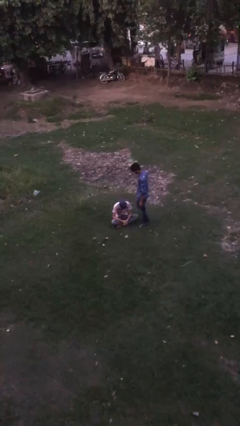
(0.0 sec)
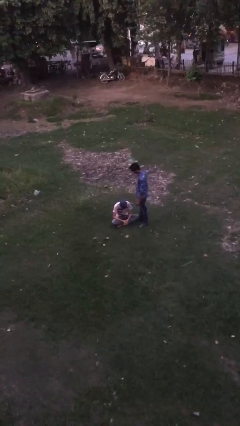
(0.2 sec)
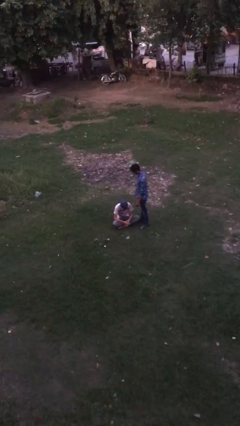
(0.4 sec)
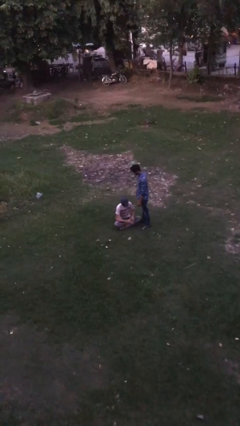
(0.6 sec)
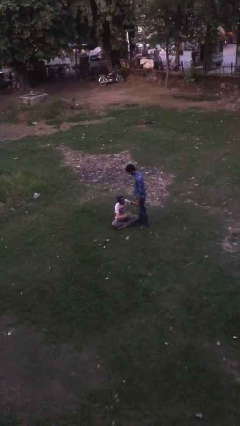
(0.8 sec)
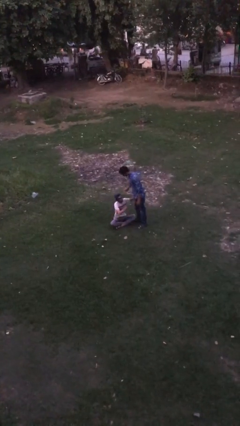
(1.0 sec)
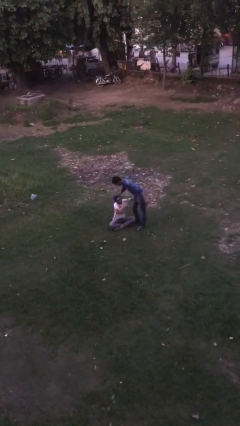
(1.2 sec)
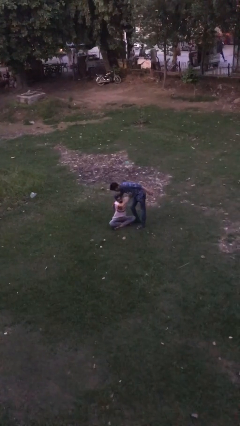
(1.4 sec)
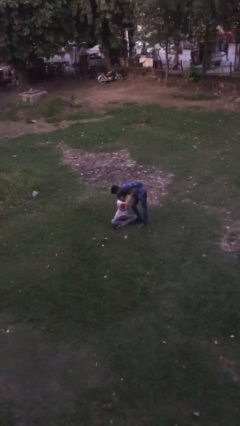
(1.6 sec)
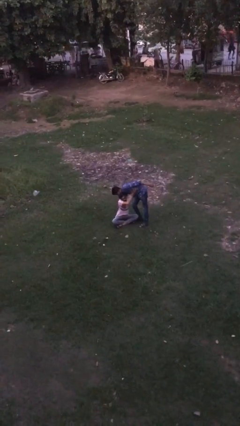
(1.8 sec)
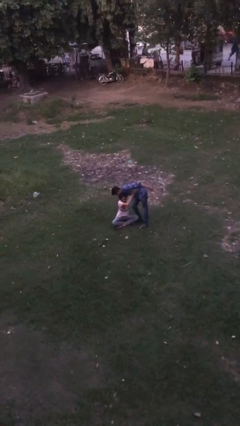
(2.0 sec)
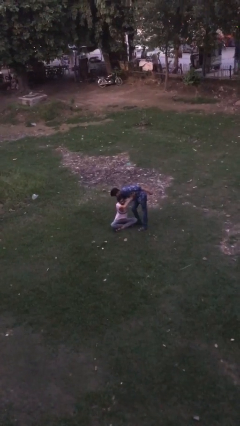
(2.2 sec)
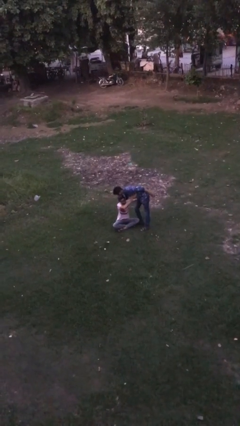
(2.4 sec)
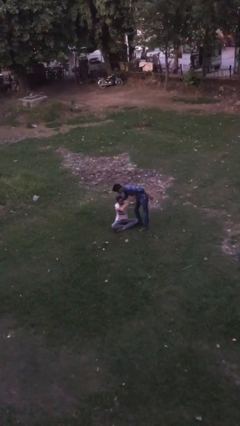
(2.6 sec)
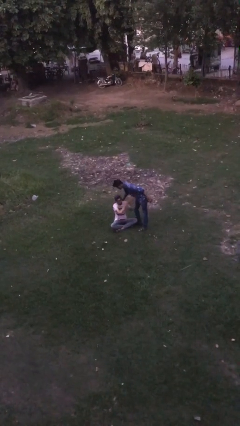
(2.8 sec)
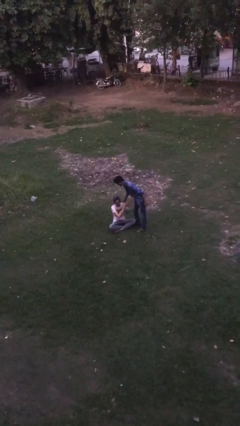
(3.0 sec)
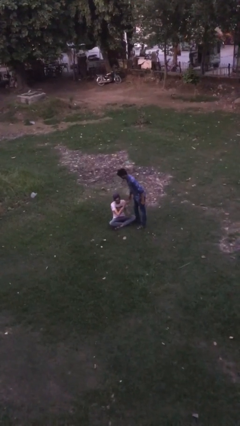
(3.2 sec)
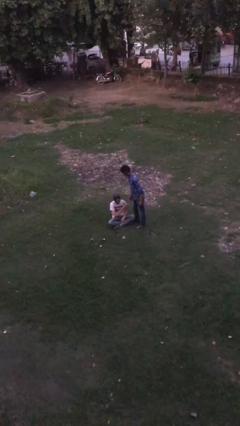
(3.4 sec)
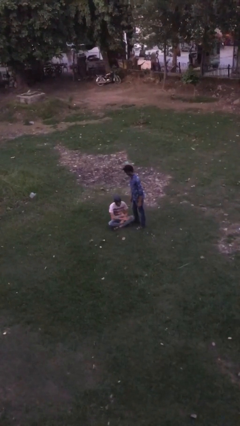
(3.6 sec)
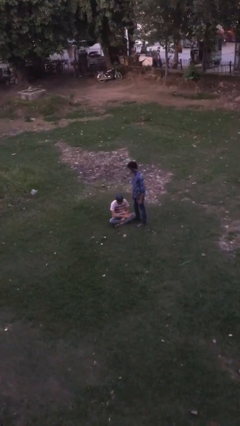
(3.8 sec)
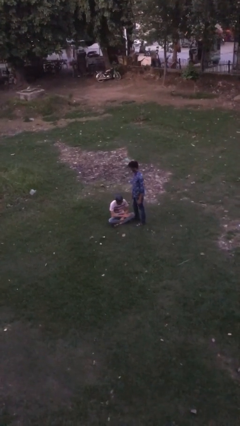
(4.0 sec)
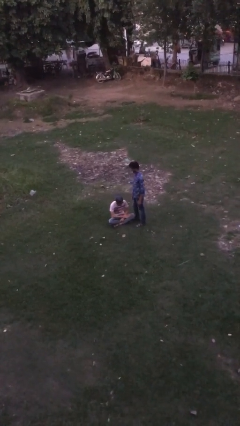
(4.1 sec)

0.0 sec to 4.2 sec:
person embraces person

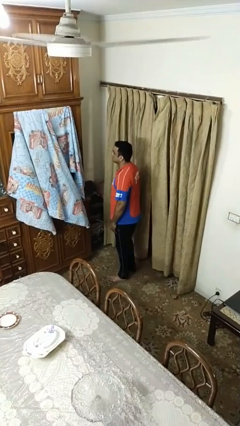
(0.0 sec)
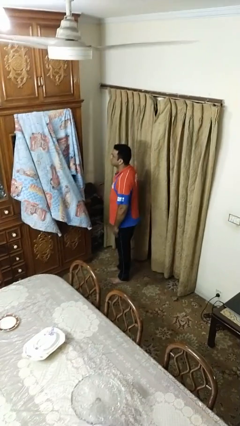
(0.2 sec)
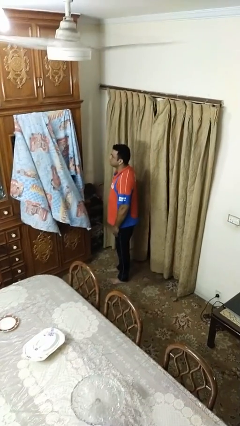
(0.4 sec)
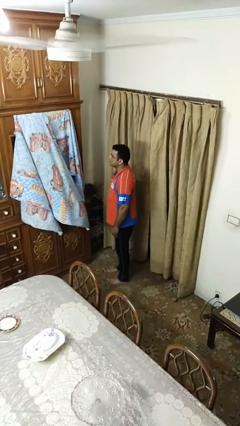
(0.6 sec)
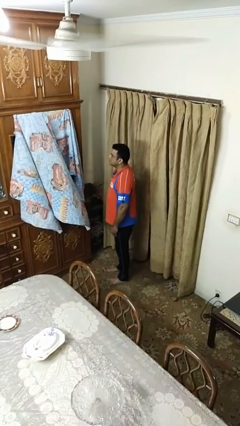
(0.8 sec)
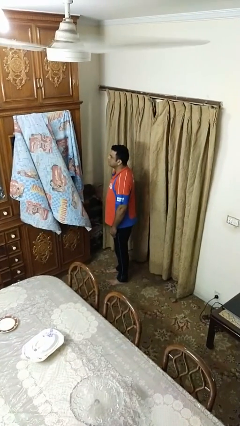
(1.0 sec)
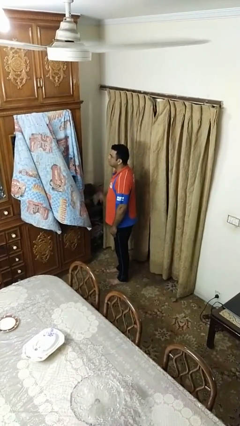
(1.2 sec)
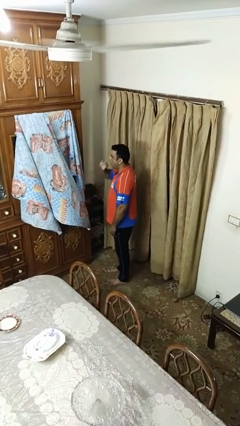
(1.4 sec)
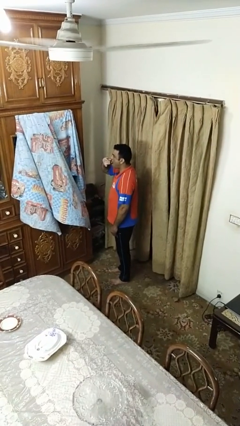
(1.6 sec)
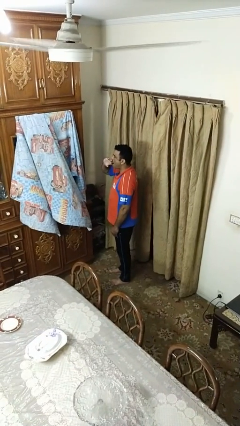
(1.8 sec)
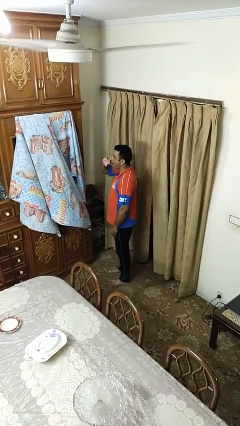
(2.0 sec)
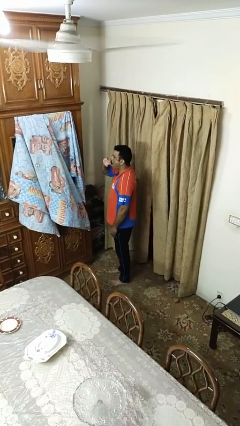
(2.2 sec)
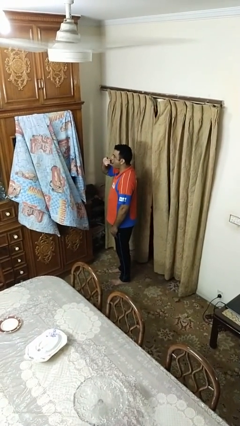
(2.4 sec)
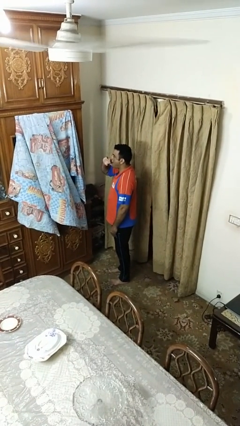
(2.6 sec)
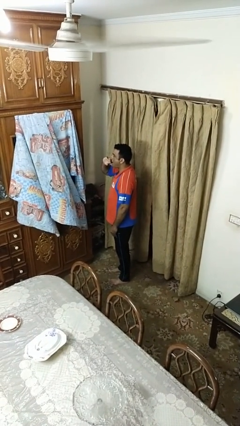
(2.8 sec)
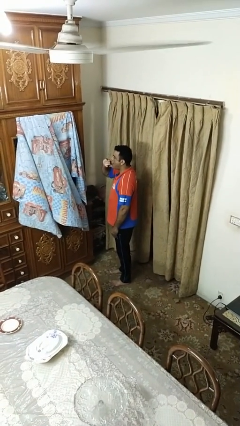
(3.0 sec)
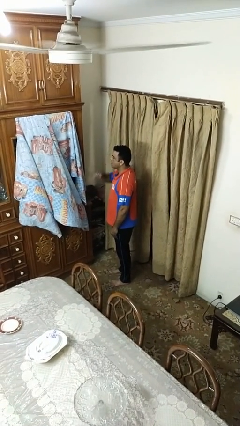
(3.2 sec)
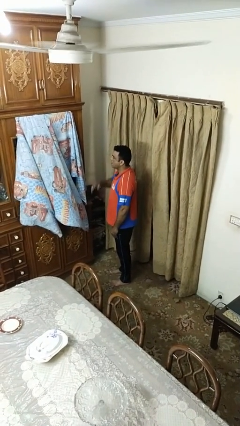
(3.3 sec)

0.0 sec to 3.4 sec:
person yawns

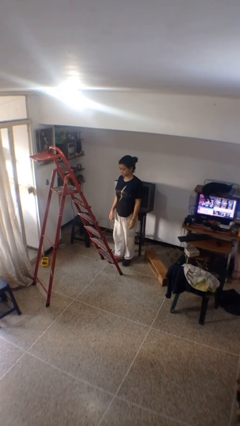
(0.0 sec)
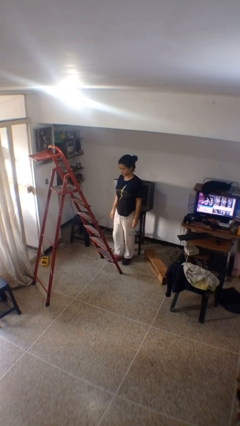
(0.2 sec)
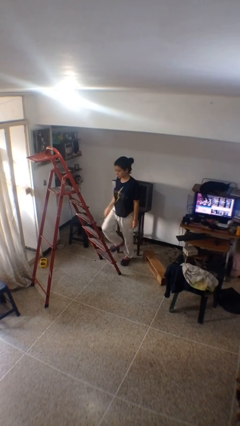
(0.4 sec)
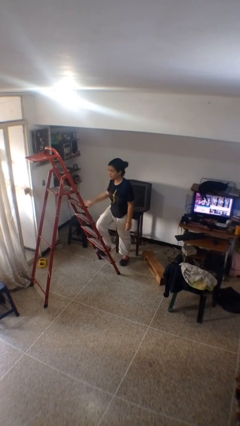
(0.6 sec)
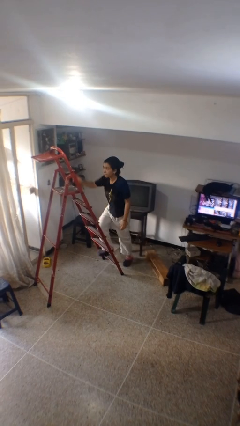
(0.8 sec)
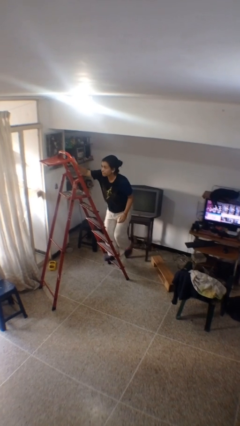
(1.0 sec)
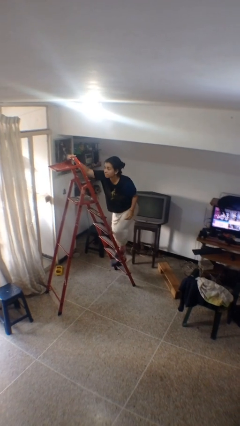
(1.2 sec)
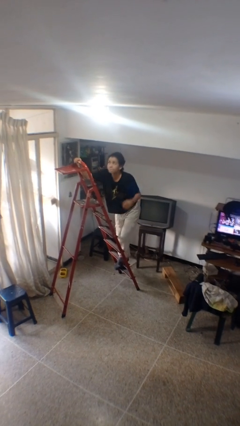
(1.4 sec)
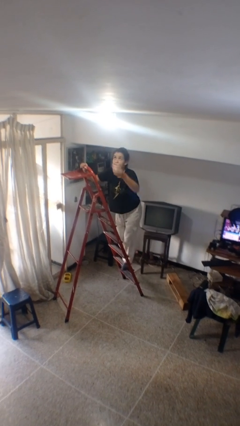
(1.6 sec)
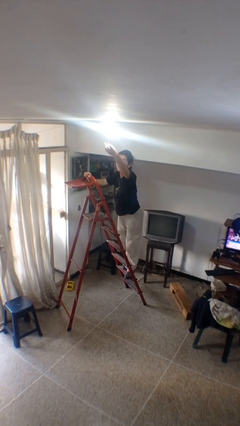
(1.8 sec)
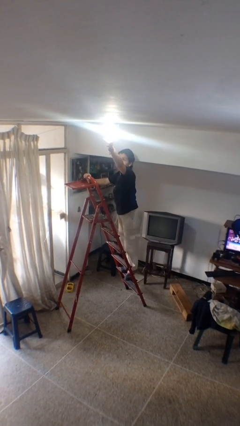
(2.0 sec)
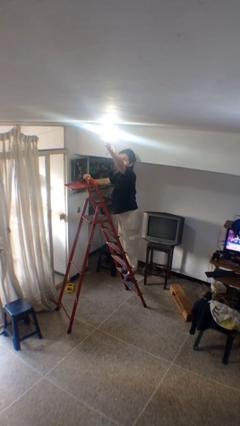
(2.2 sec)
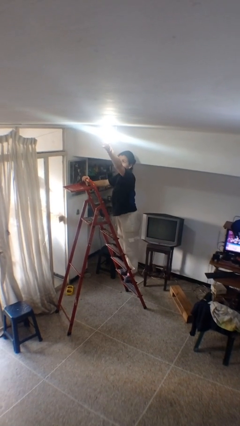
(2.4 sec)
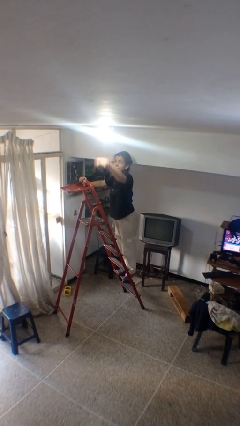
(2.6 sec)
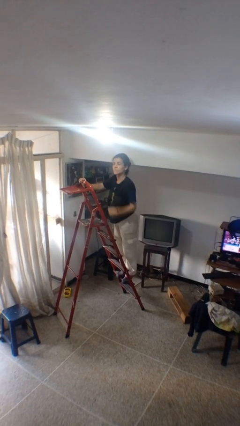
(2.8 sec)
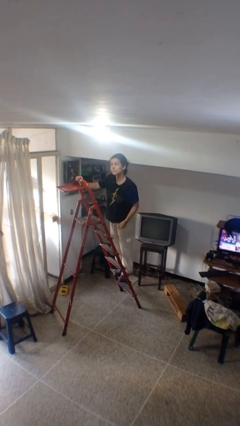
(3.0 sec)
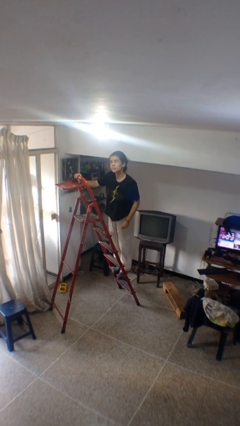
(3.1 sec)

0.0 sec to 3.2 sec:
person climbs up ladder

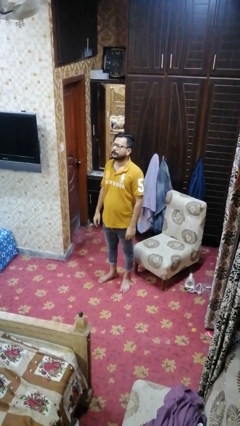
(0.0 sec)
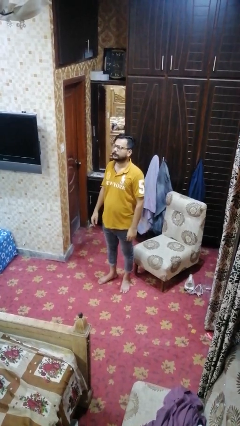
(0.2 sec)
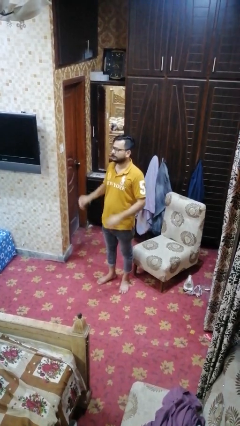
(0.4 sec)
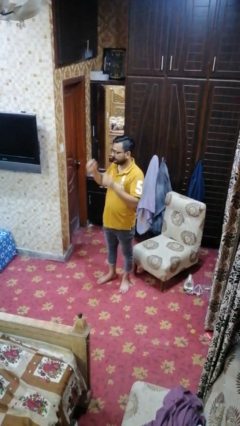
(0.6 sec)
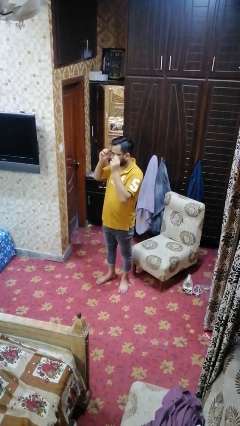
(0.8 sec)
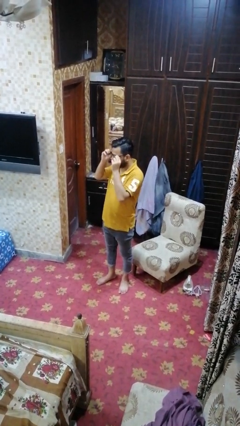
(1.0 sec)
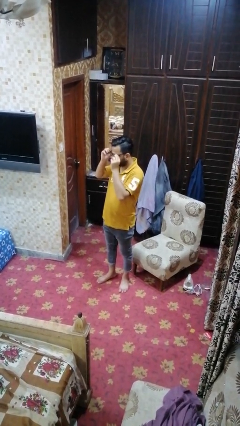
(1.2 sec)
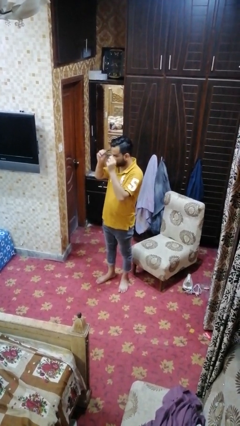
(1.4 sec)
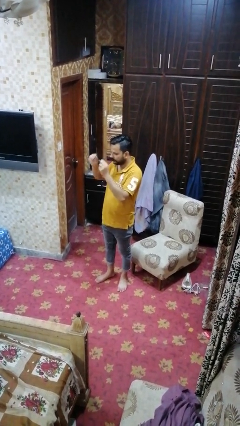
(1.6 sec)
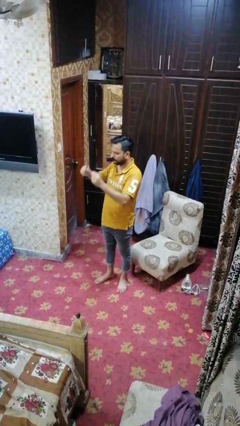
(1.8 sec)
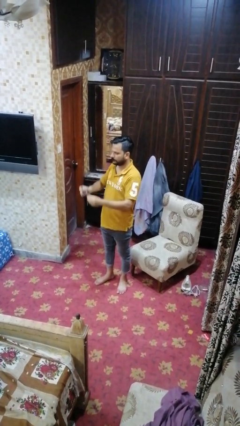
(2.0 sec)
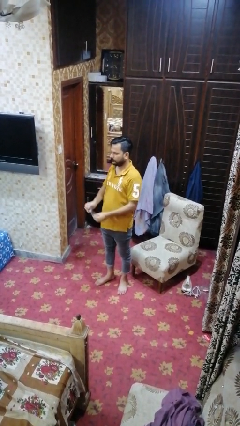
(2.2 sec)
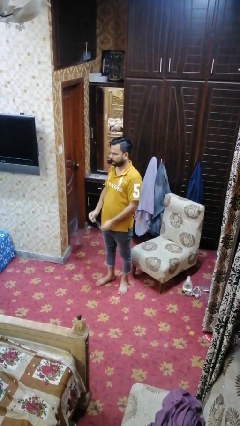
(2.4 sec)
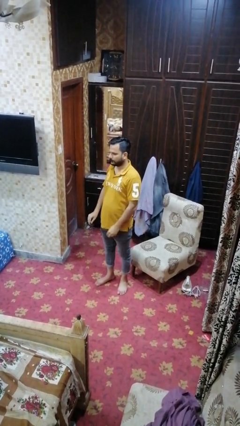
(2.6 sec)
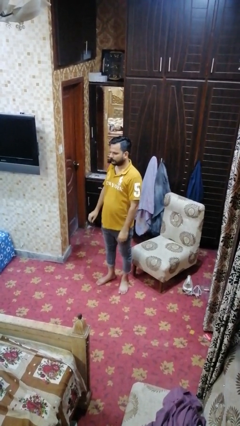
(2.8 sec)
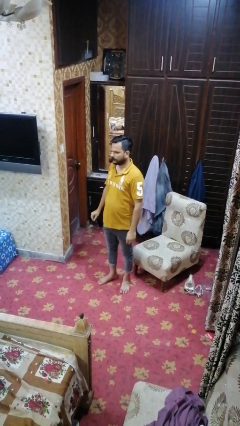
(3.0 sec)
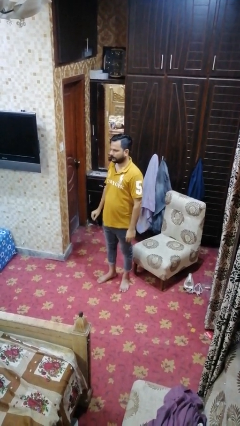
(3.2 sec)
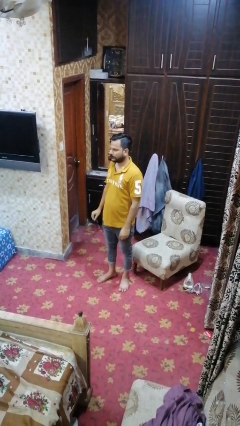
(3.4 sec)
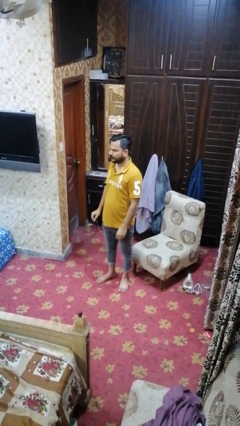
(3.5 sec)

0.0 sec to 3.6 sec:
person takes off glasses

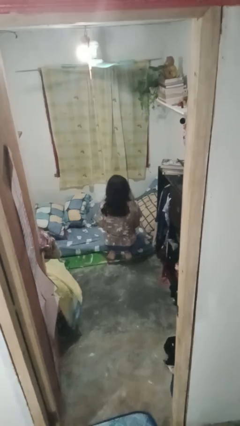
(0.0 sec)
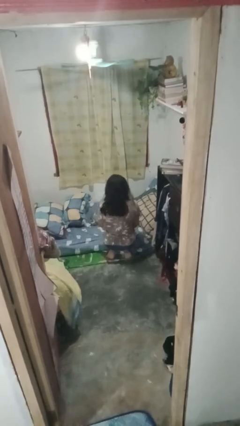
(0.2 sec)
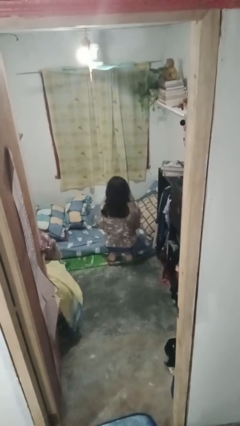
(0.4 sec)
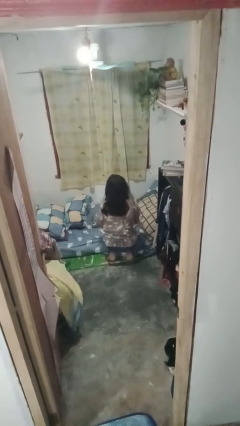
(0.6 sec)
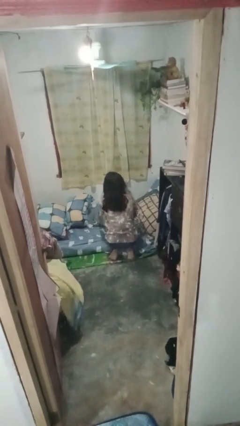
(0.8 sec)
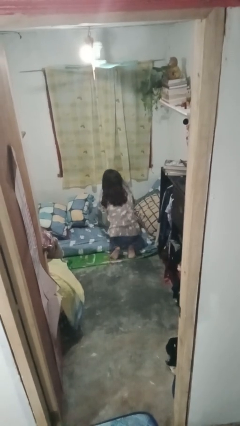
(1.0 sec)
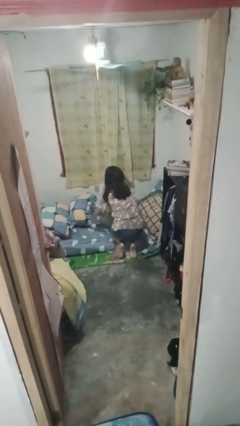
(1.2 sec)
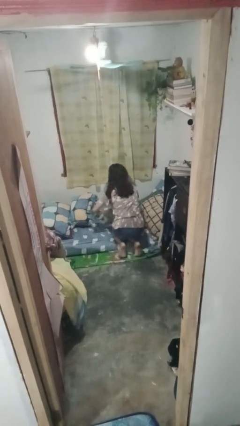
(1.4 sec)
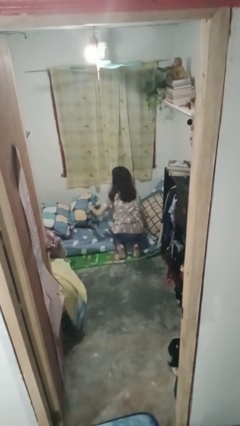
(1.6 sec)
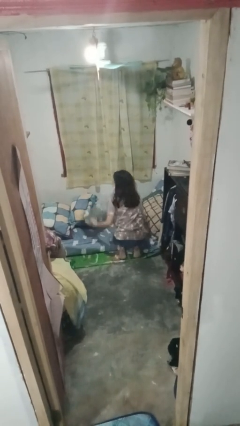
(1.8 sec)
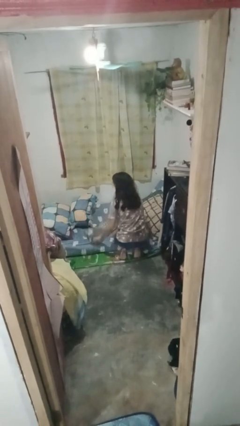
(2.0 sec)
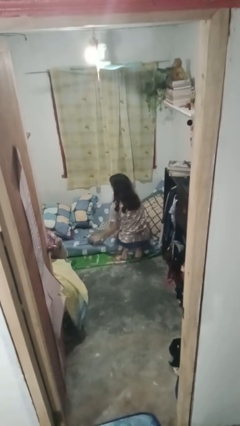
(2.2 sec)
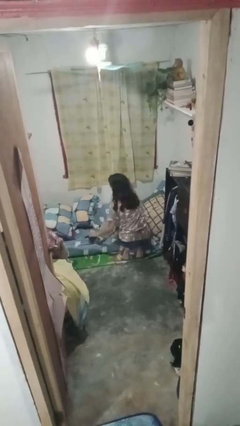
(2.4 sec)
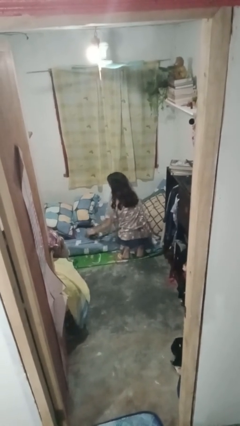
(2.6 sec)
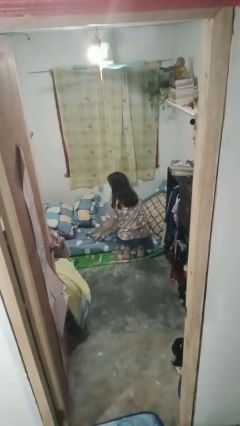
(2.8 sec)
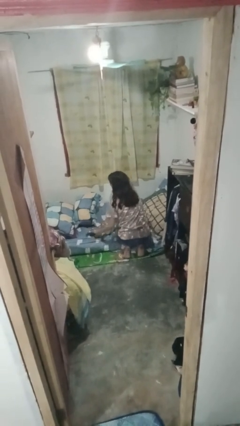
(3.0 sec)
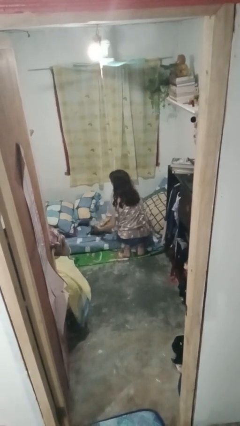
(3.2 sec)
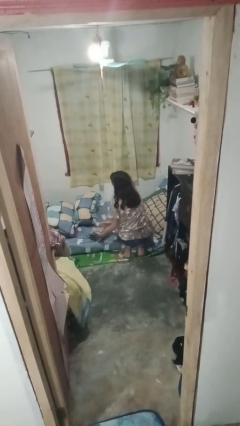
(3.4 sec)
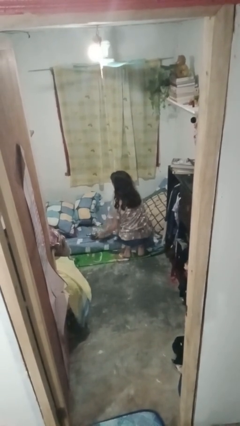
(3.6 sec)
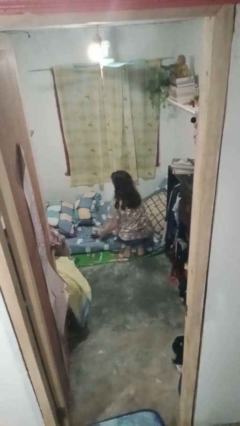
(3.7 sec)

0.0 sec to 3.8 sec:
person makes bed
